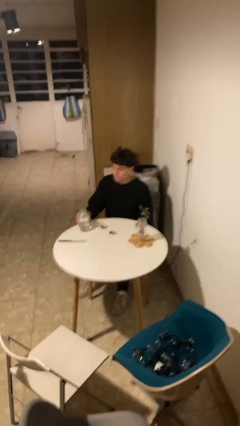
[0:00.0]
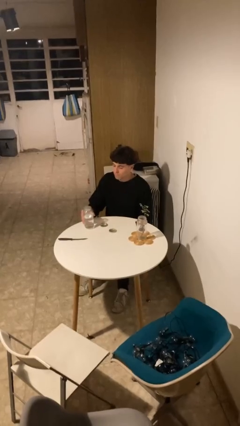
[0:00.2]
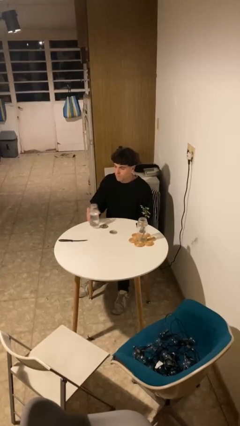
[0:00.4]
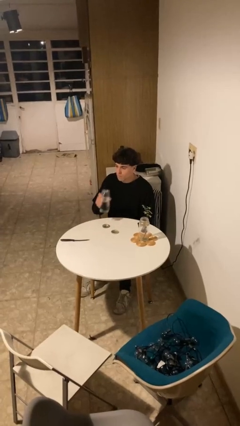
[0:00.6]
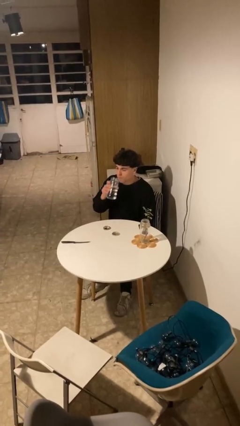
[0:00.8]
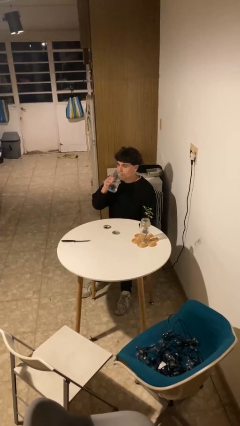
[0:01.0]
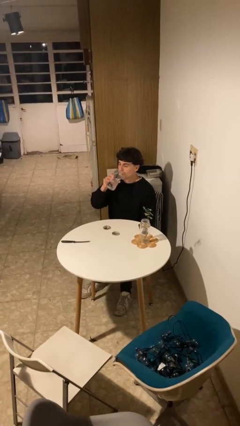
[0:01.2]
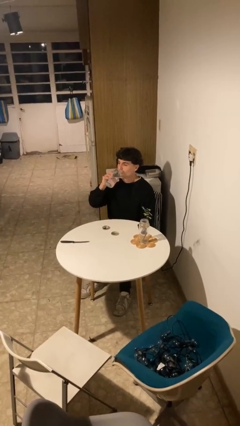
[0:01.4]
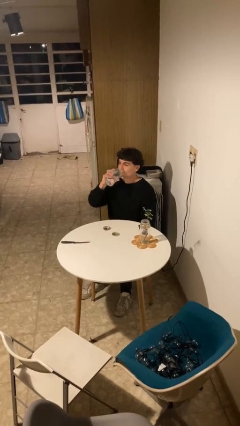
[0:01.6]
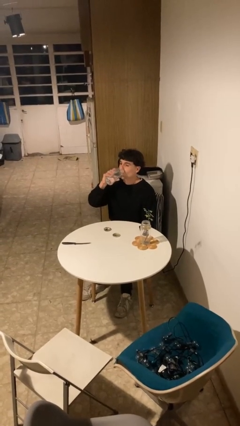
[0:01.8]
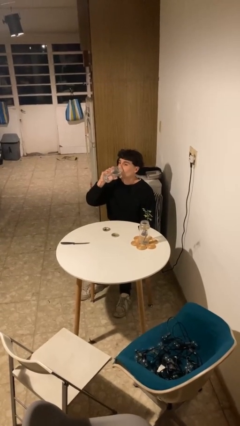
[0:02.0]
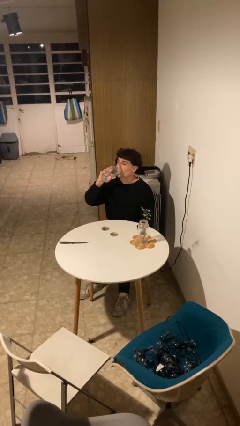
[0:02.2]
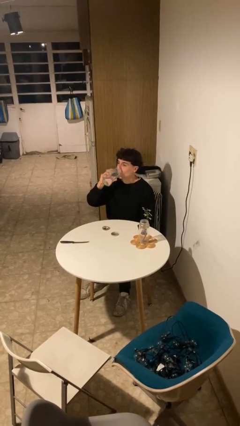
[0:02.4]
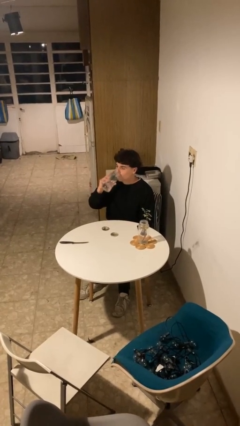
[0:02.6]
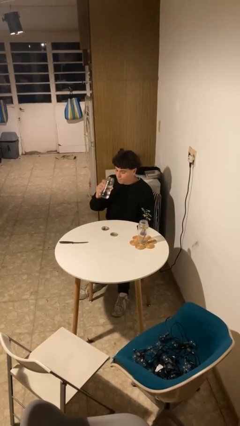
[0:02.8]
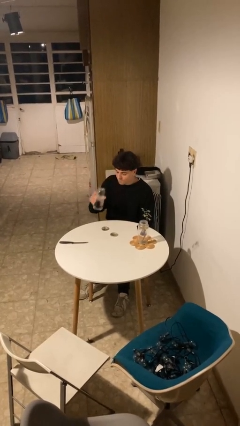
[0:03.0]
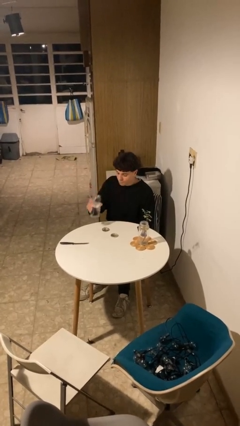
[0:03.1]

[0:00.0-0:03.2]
person drinks from cup

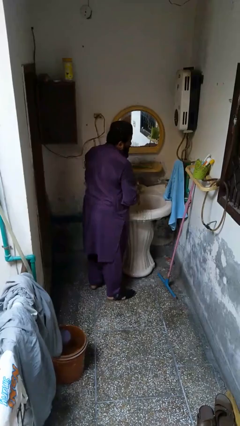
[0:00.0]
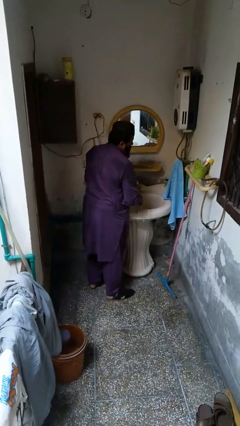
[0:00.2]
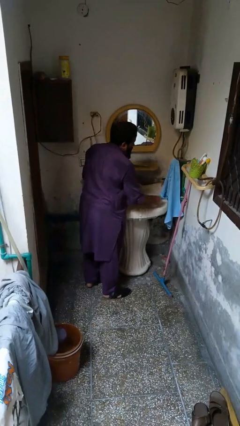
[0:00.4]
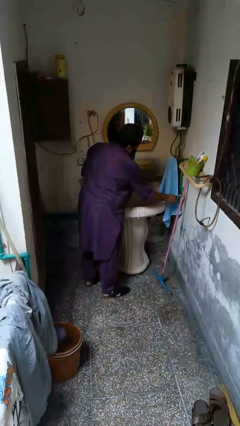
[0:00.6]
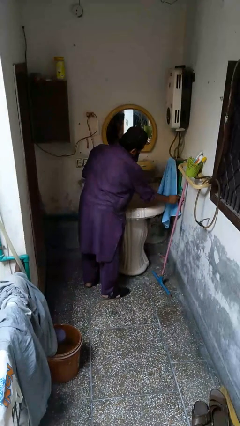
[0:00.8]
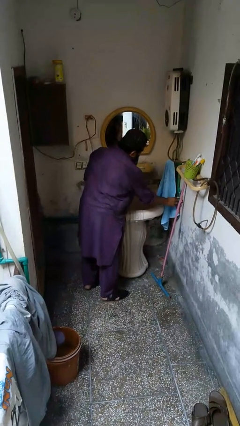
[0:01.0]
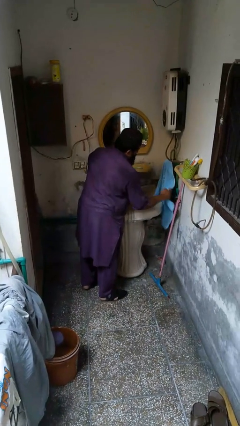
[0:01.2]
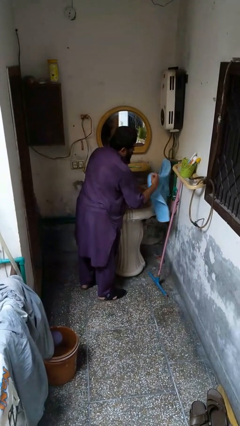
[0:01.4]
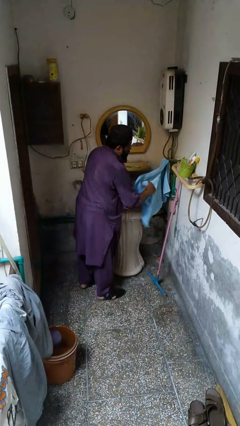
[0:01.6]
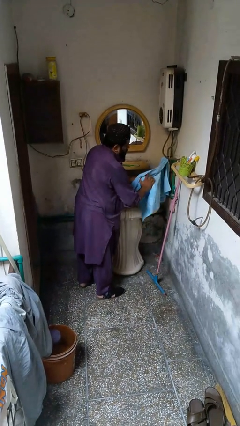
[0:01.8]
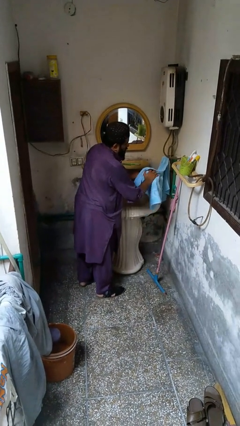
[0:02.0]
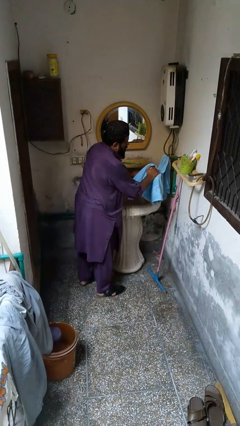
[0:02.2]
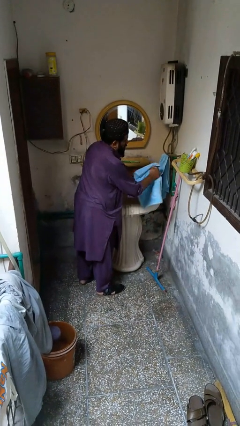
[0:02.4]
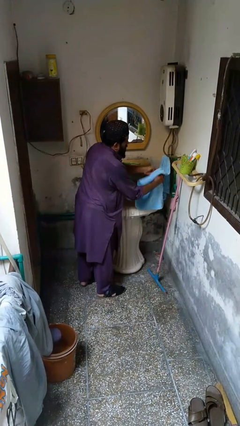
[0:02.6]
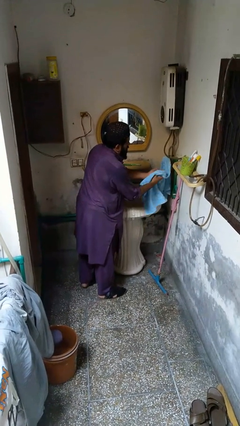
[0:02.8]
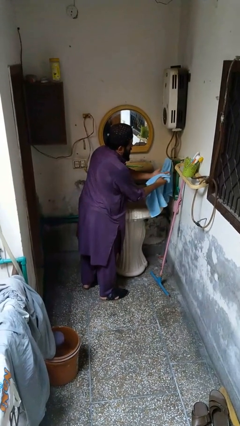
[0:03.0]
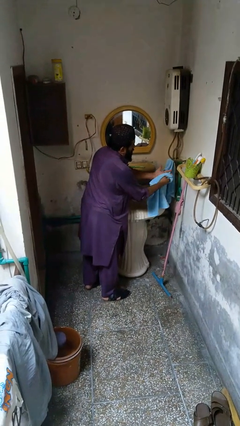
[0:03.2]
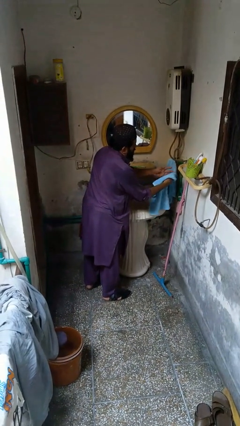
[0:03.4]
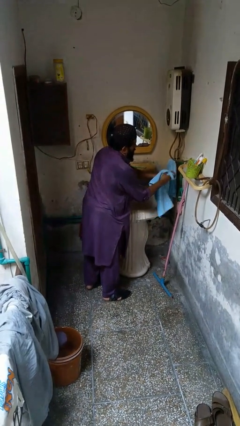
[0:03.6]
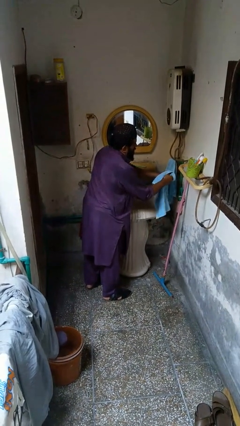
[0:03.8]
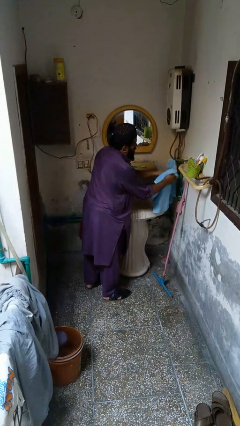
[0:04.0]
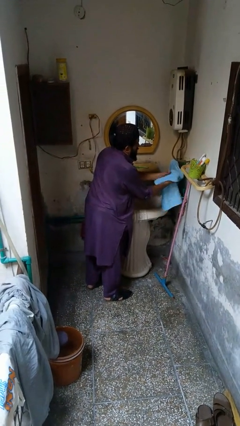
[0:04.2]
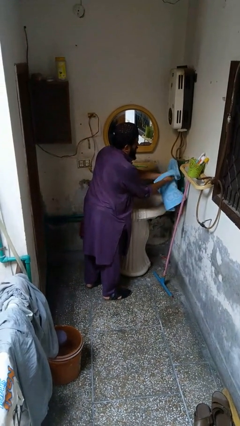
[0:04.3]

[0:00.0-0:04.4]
person dries hands with towel

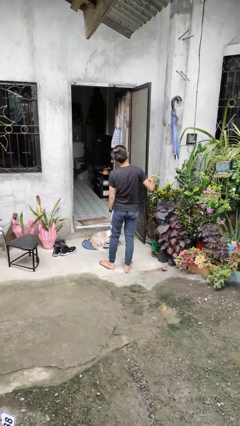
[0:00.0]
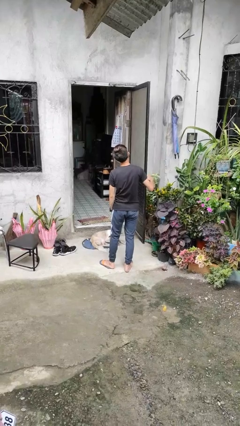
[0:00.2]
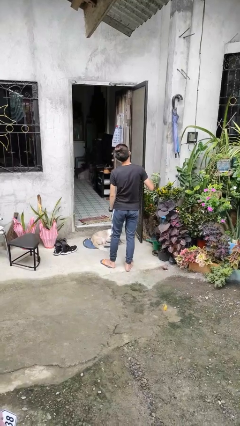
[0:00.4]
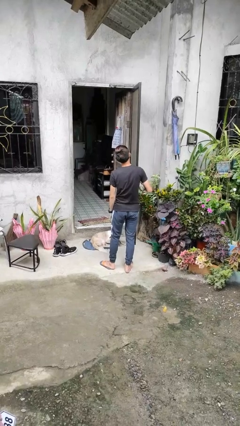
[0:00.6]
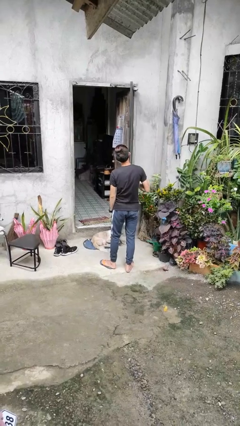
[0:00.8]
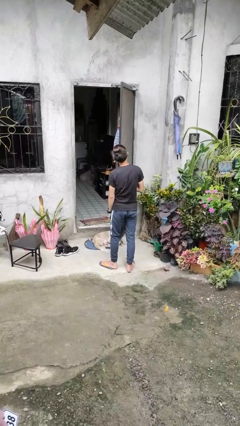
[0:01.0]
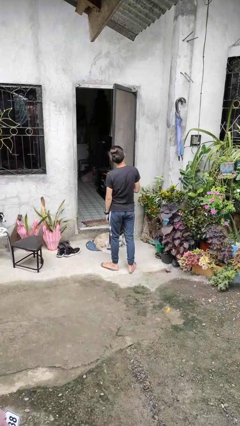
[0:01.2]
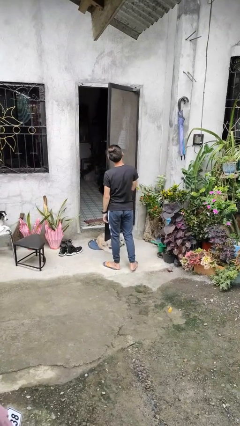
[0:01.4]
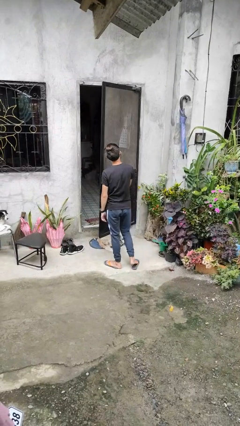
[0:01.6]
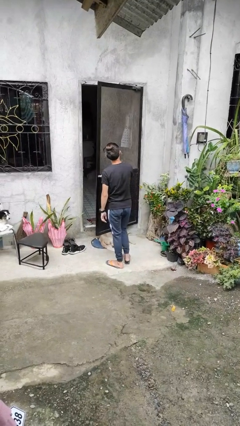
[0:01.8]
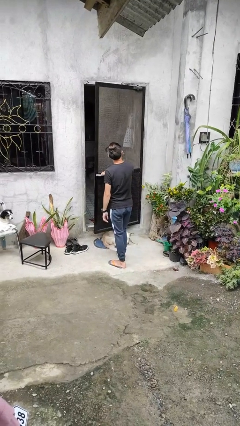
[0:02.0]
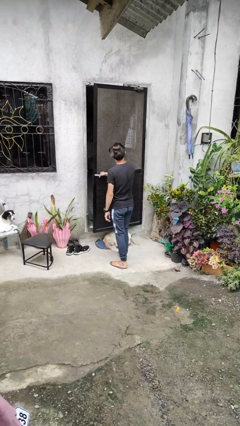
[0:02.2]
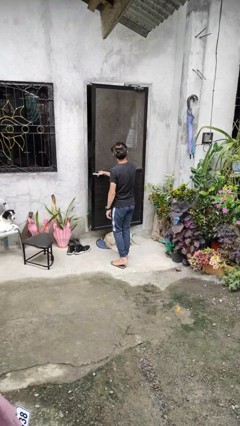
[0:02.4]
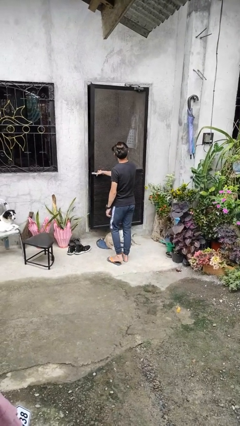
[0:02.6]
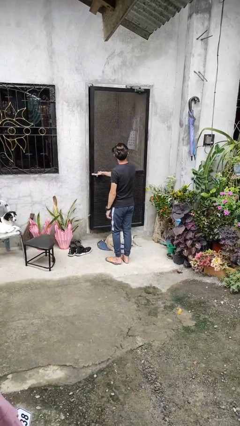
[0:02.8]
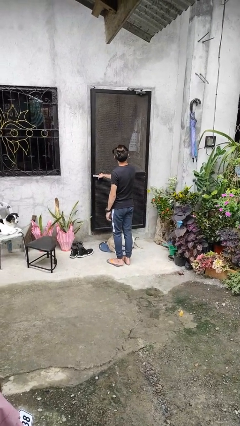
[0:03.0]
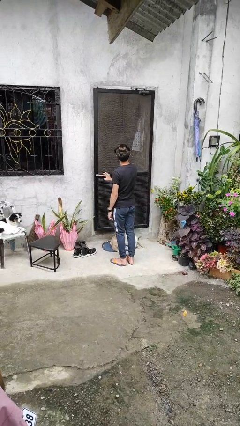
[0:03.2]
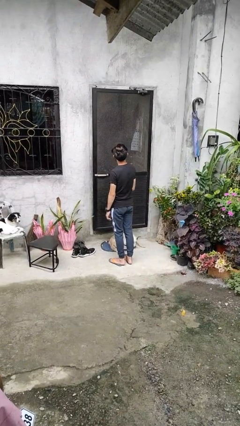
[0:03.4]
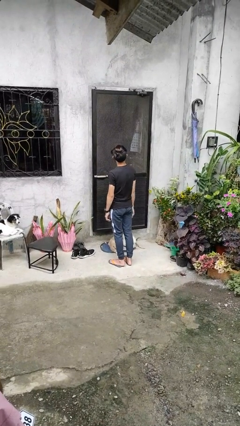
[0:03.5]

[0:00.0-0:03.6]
person closes facility door

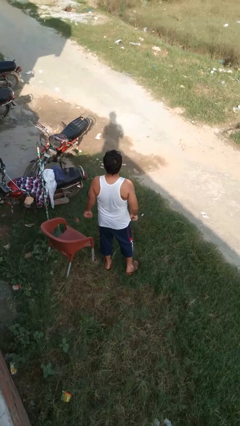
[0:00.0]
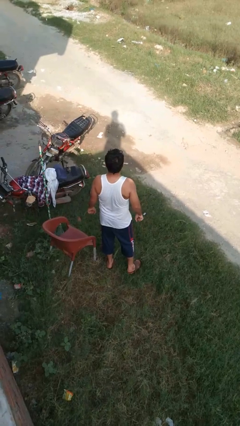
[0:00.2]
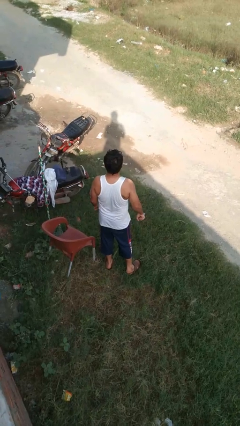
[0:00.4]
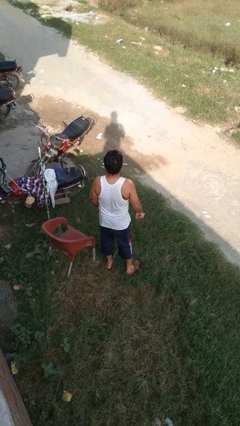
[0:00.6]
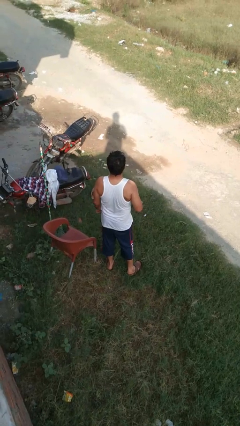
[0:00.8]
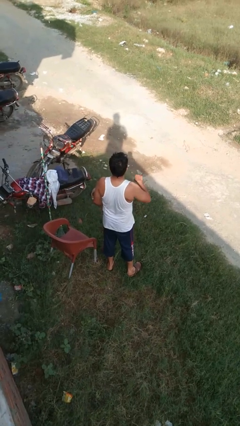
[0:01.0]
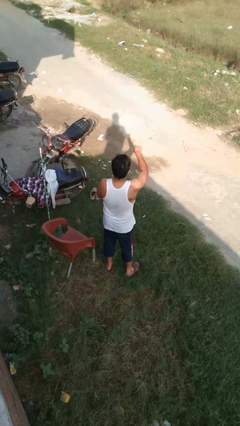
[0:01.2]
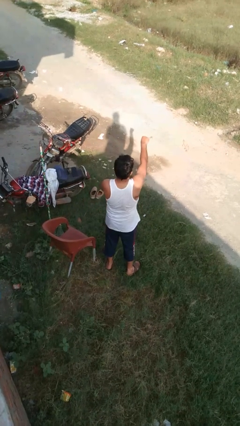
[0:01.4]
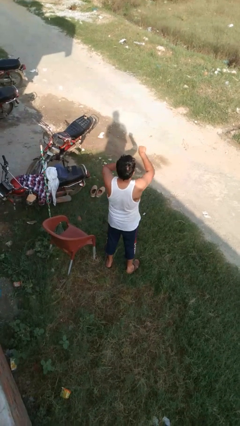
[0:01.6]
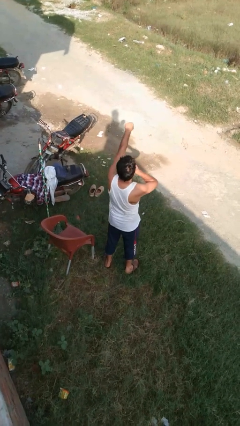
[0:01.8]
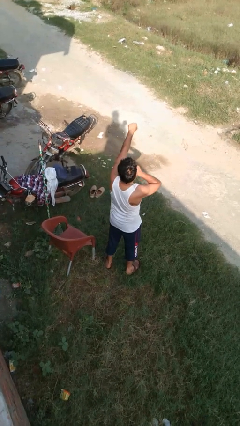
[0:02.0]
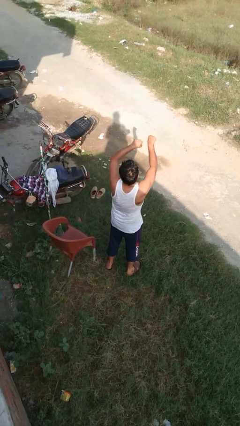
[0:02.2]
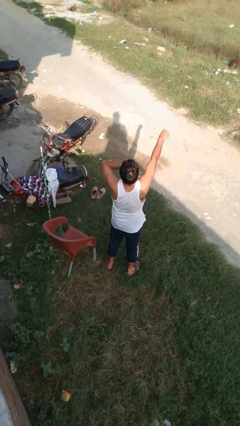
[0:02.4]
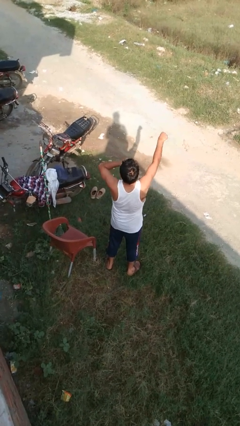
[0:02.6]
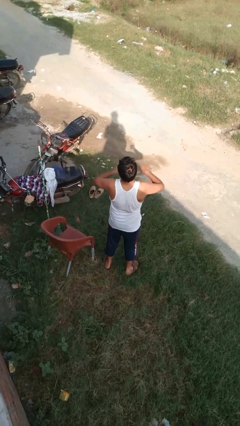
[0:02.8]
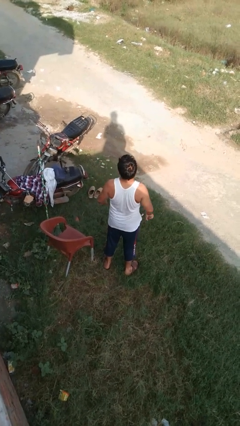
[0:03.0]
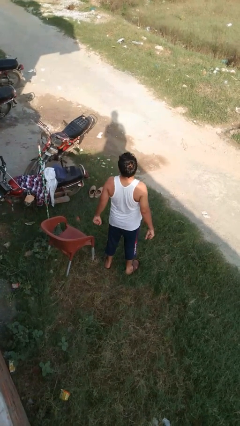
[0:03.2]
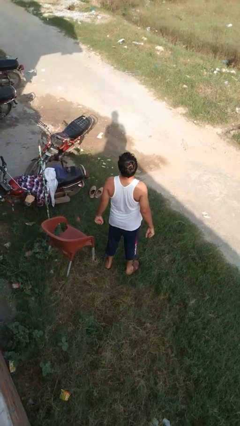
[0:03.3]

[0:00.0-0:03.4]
person punches

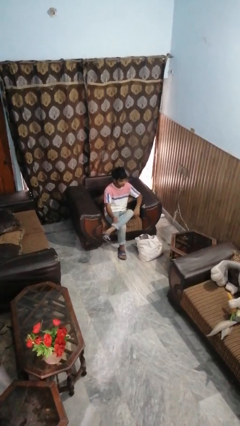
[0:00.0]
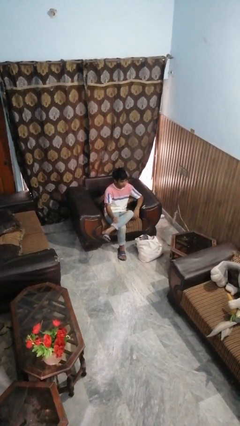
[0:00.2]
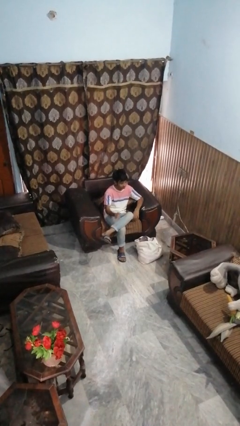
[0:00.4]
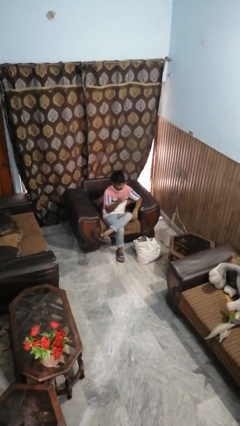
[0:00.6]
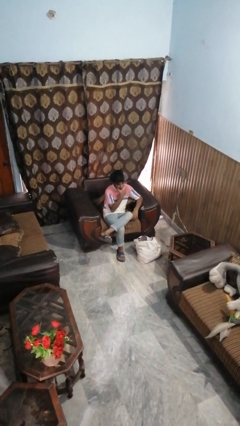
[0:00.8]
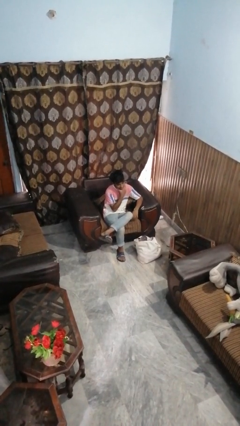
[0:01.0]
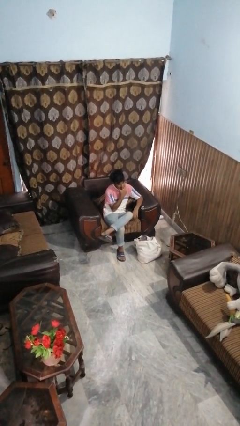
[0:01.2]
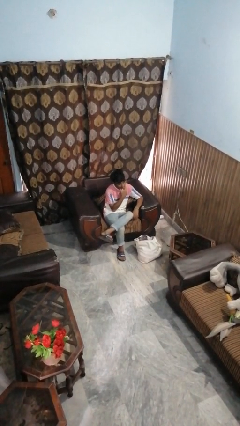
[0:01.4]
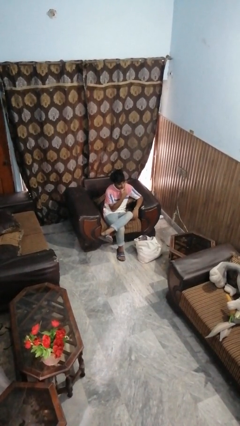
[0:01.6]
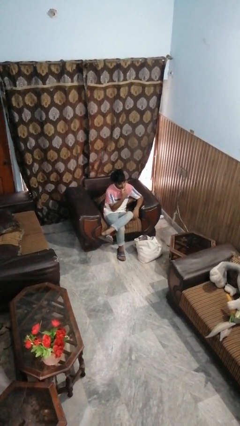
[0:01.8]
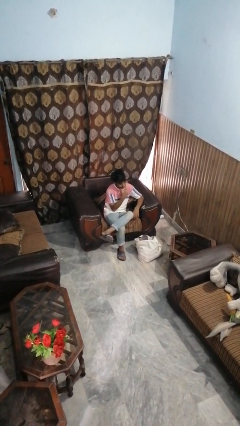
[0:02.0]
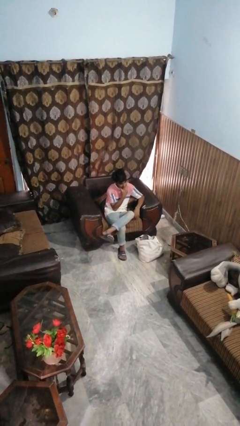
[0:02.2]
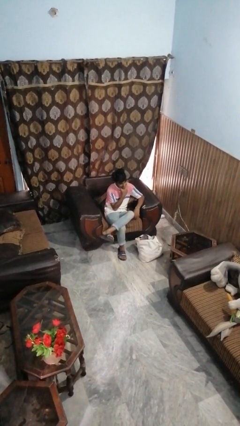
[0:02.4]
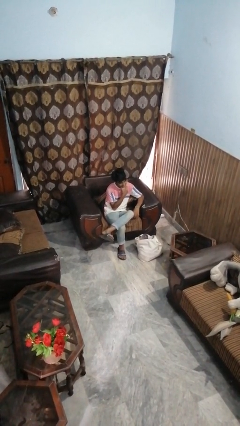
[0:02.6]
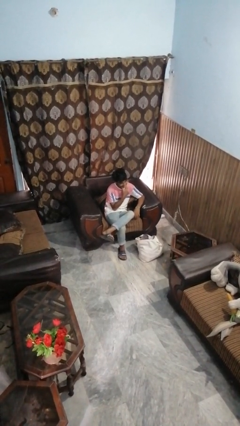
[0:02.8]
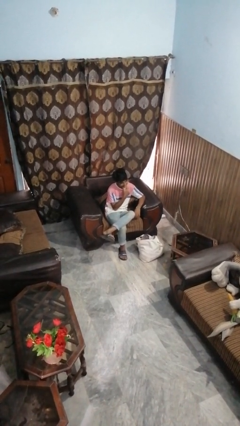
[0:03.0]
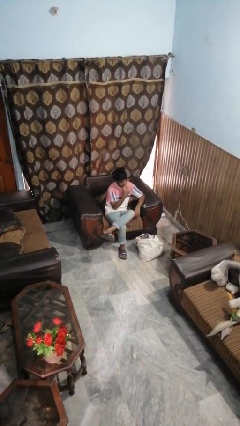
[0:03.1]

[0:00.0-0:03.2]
person strokes chin
